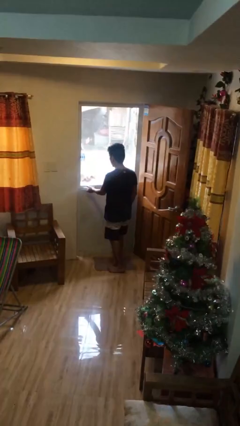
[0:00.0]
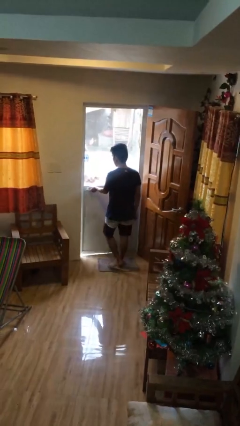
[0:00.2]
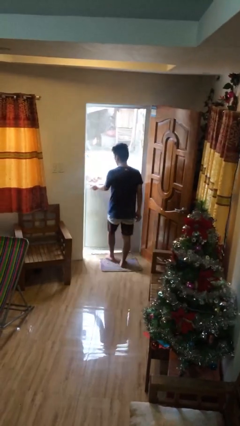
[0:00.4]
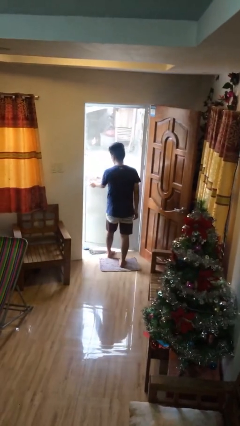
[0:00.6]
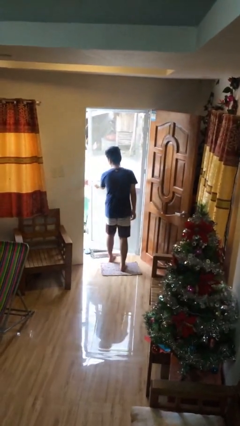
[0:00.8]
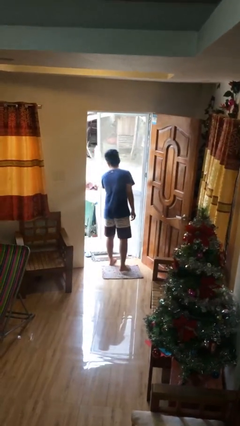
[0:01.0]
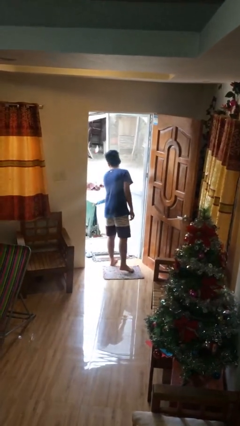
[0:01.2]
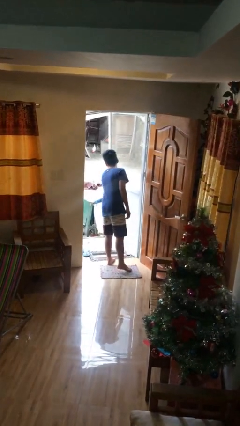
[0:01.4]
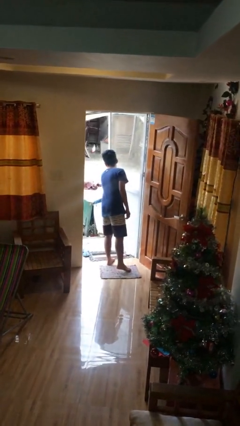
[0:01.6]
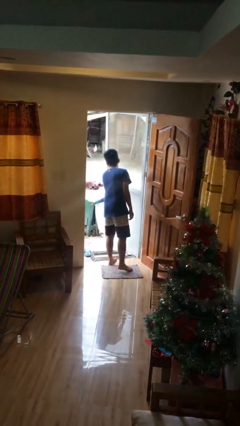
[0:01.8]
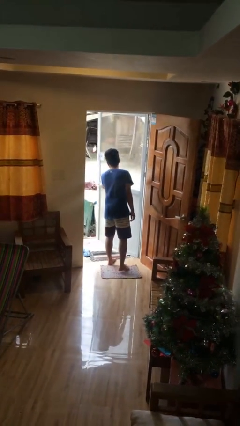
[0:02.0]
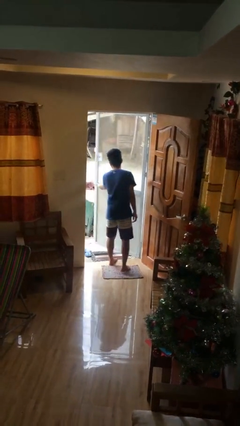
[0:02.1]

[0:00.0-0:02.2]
person opens facility door

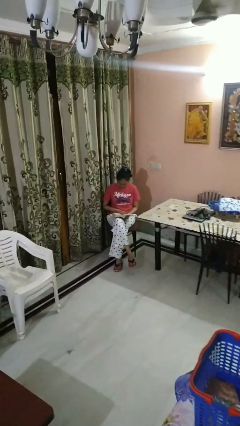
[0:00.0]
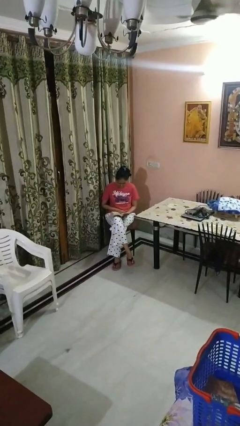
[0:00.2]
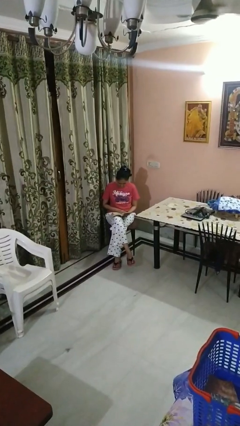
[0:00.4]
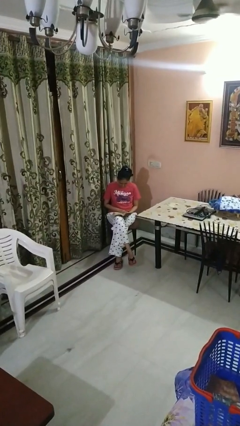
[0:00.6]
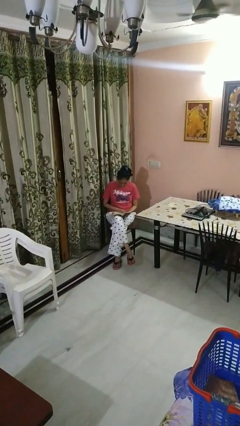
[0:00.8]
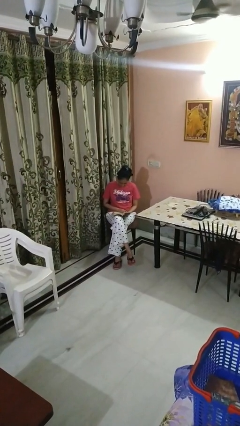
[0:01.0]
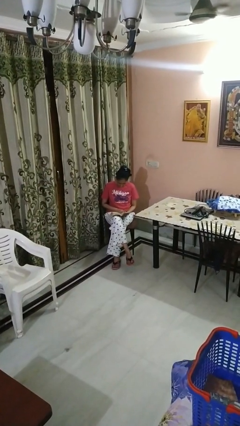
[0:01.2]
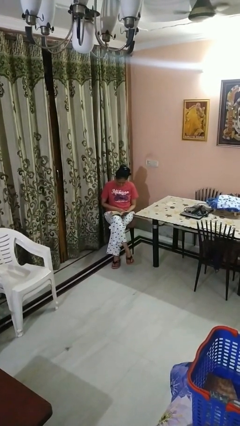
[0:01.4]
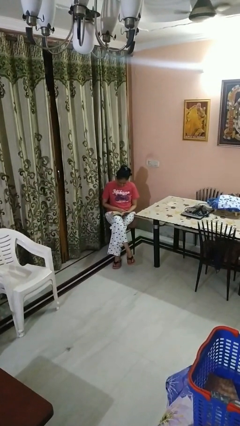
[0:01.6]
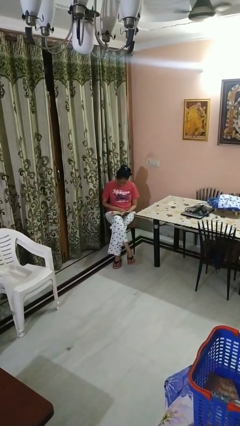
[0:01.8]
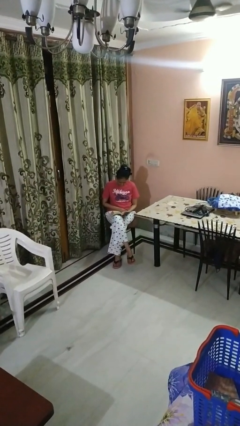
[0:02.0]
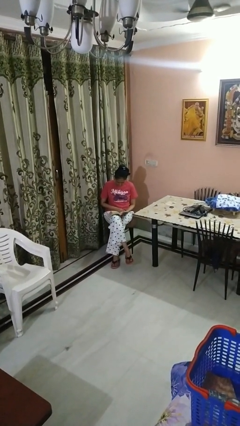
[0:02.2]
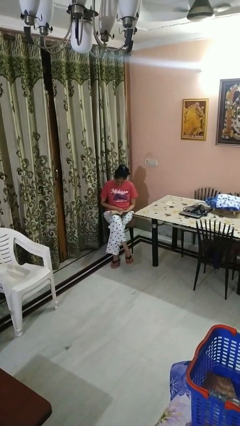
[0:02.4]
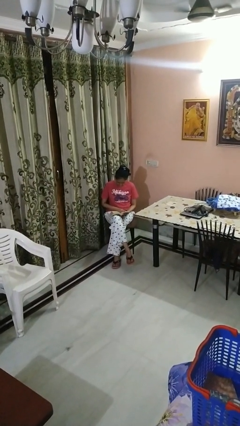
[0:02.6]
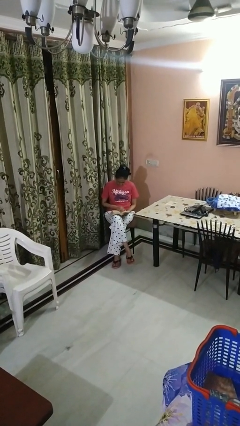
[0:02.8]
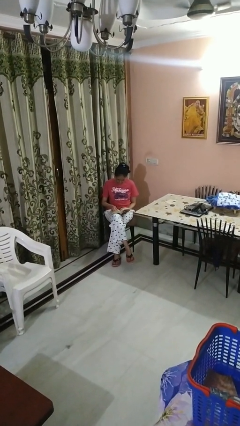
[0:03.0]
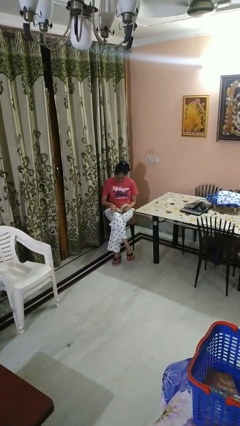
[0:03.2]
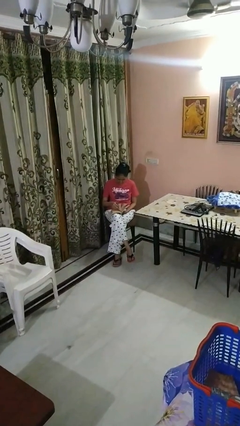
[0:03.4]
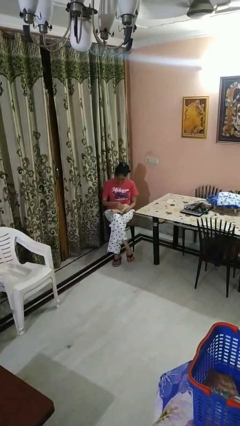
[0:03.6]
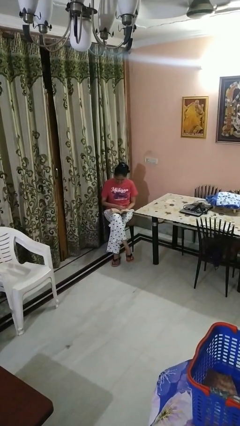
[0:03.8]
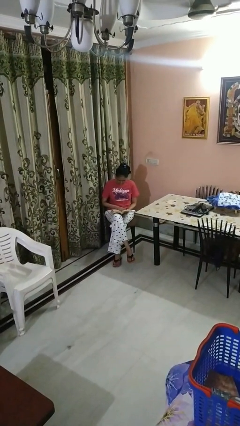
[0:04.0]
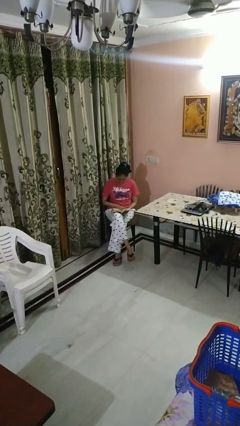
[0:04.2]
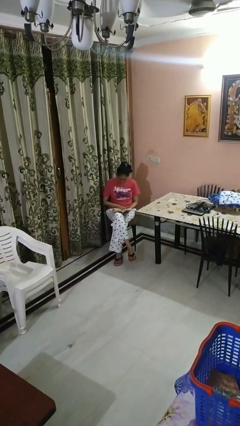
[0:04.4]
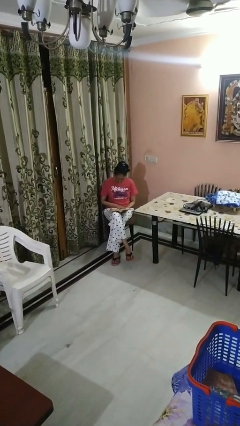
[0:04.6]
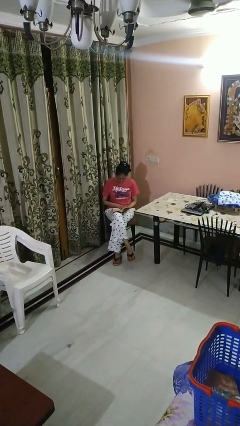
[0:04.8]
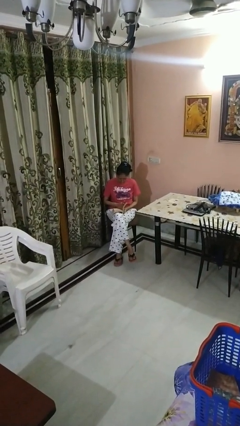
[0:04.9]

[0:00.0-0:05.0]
person reads book

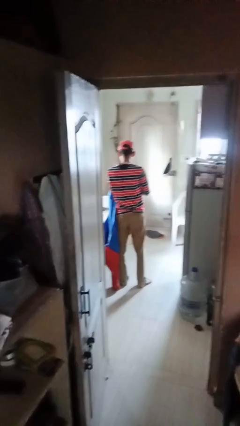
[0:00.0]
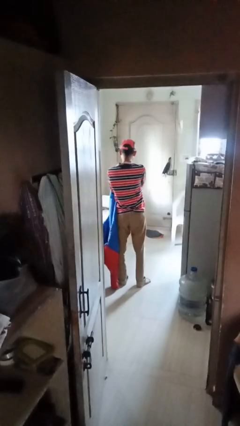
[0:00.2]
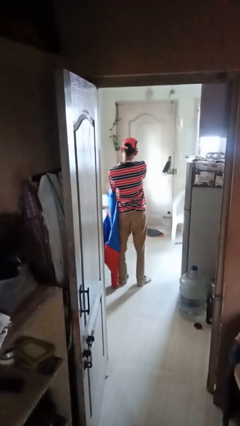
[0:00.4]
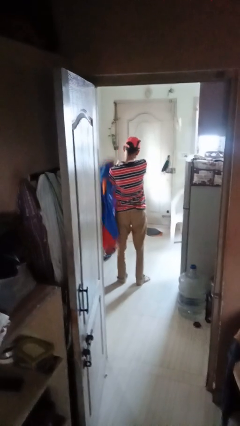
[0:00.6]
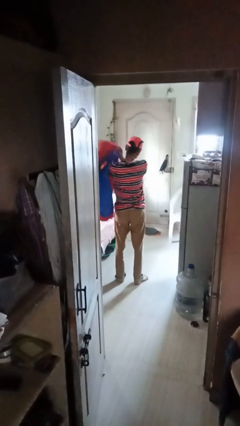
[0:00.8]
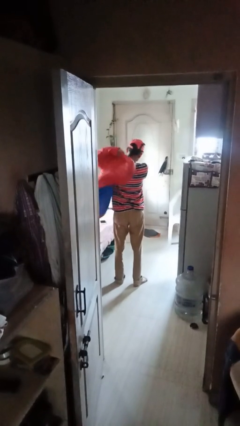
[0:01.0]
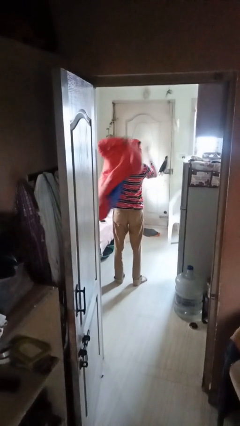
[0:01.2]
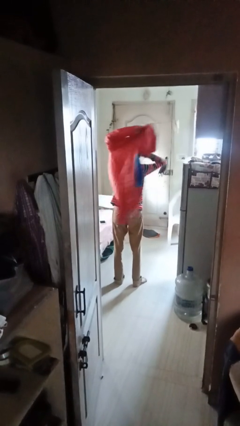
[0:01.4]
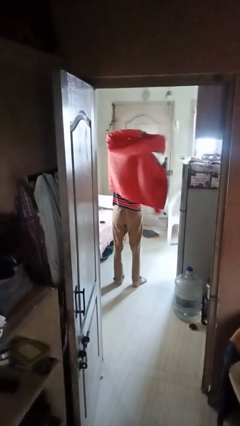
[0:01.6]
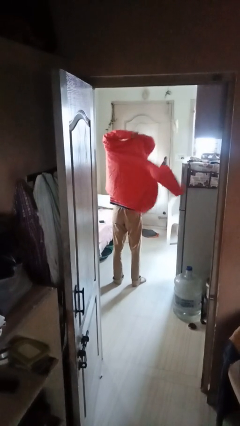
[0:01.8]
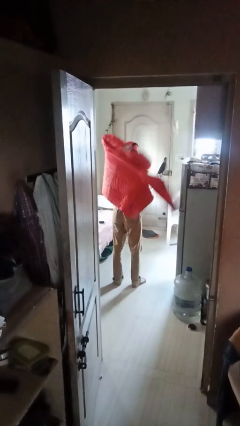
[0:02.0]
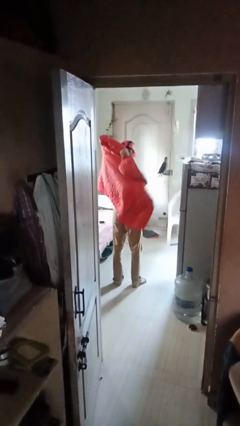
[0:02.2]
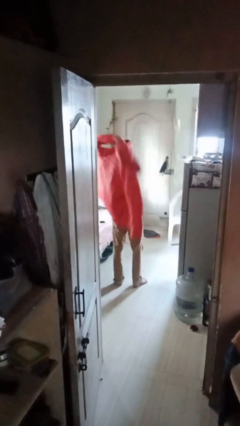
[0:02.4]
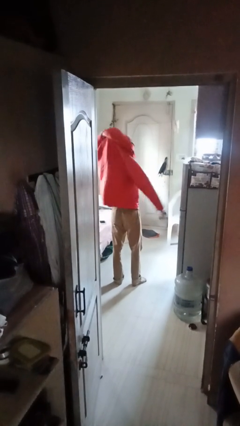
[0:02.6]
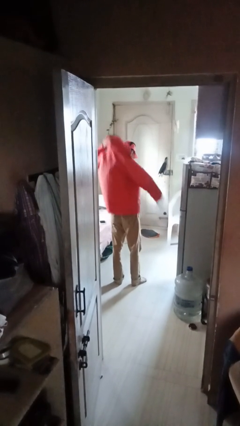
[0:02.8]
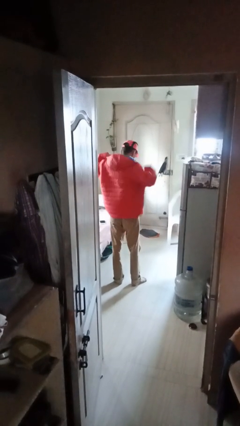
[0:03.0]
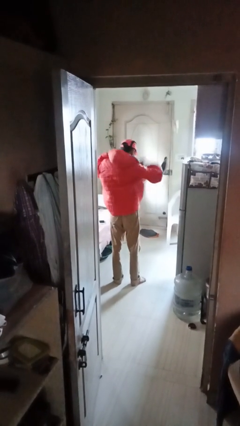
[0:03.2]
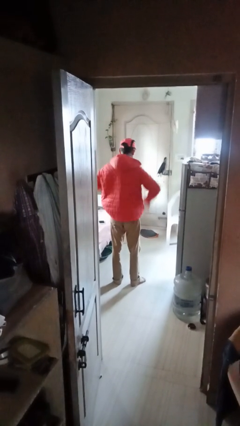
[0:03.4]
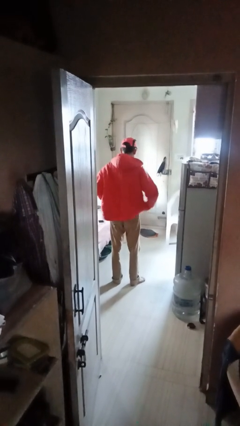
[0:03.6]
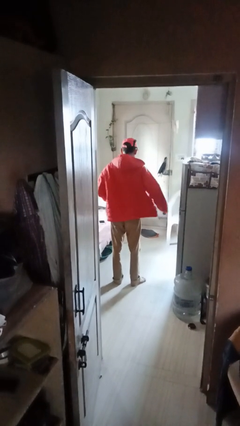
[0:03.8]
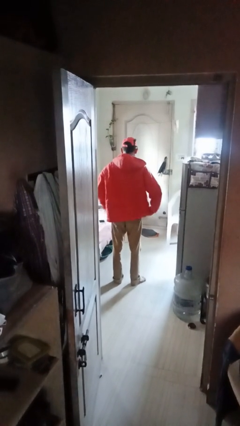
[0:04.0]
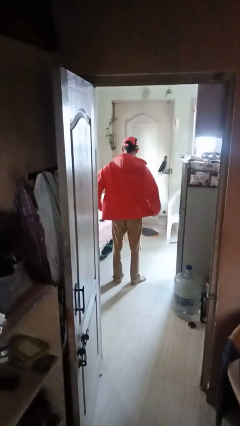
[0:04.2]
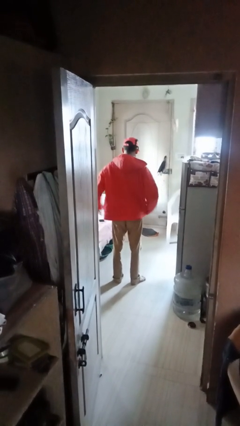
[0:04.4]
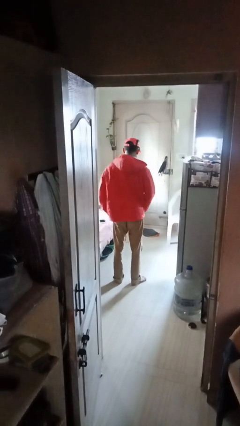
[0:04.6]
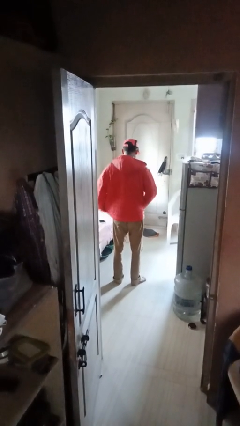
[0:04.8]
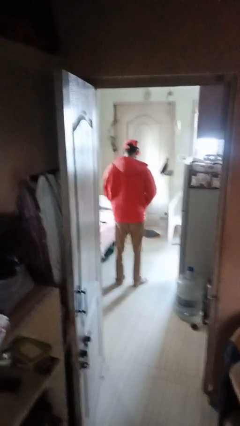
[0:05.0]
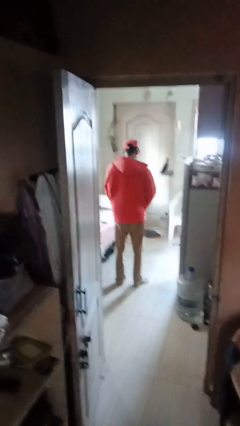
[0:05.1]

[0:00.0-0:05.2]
person puts on jacket

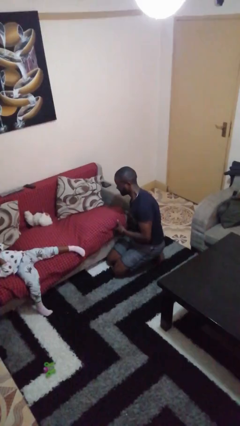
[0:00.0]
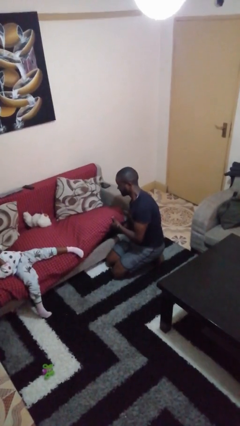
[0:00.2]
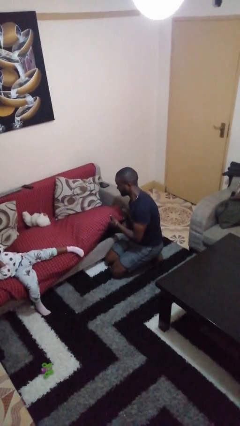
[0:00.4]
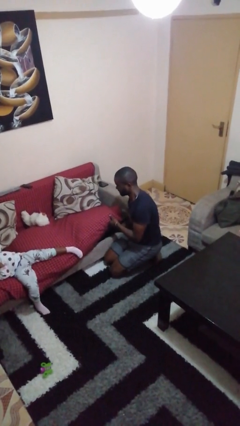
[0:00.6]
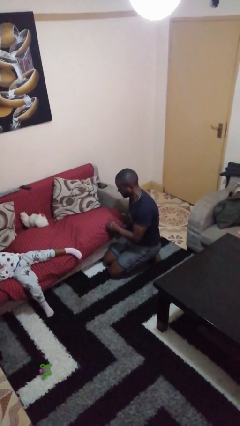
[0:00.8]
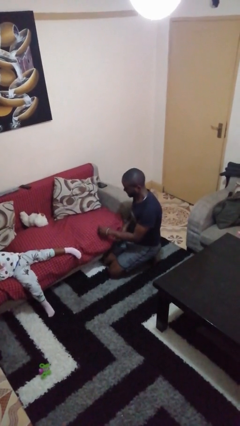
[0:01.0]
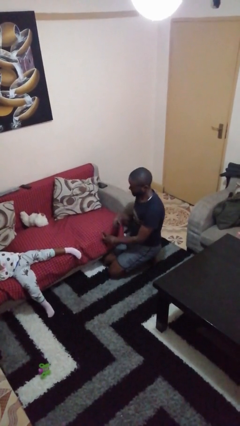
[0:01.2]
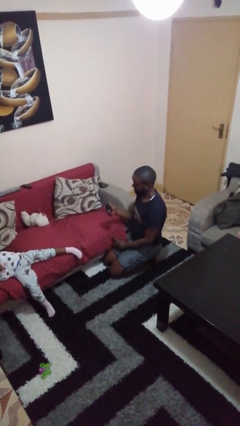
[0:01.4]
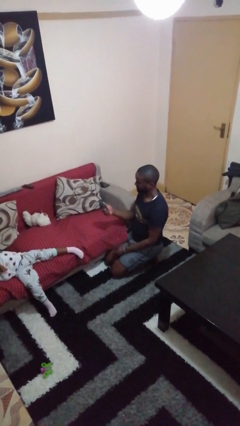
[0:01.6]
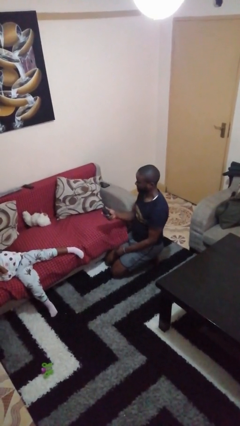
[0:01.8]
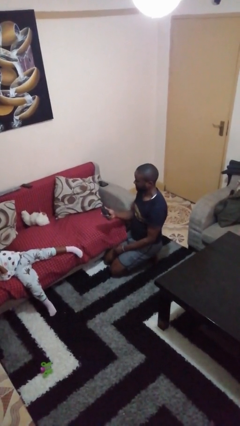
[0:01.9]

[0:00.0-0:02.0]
person searches in couch

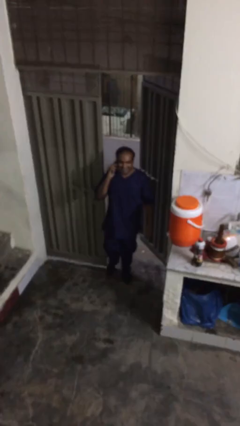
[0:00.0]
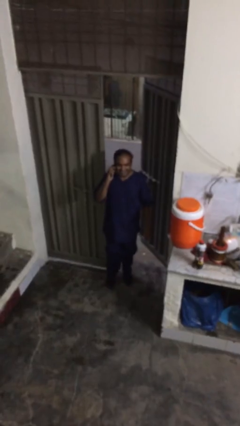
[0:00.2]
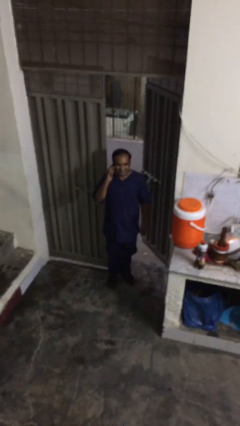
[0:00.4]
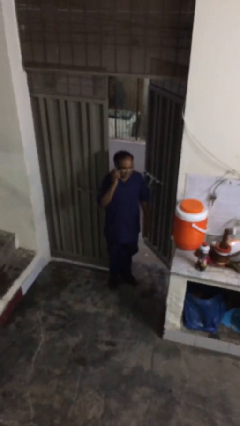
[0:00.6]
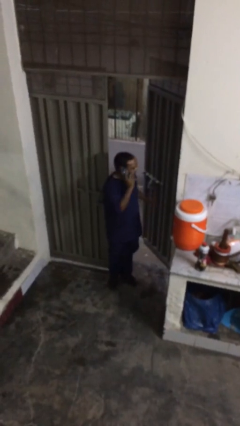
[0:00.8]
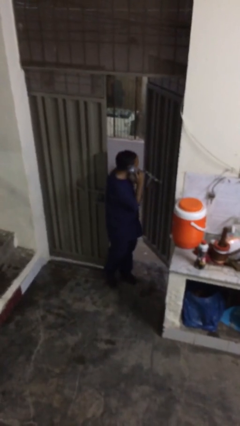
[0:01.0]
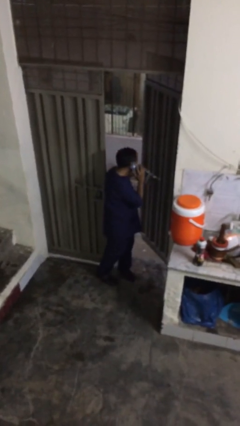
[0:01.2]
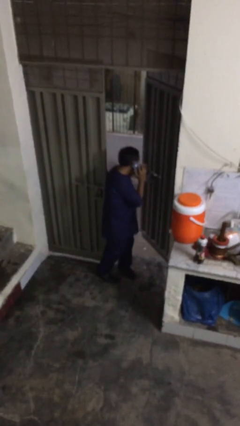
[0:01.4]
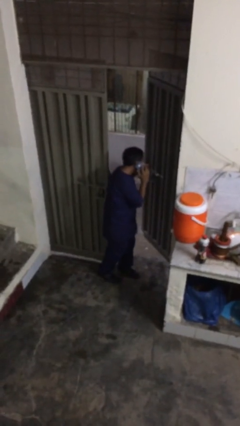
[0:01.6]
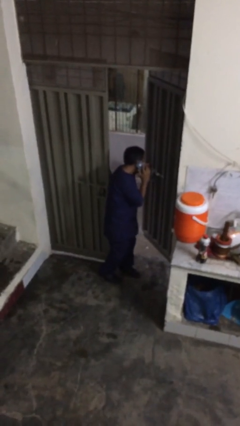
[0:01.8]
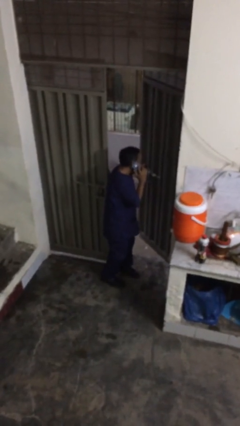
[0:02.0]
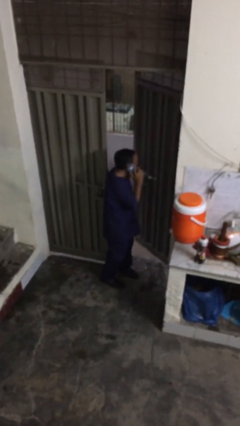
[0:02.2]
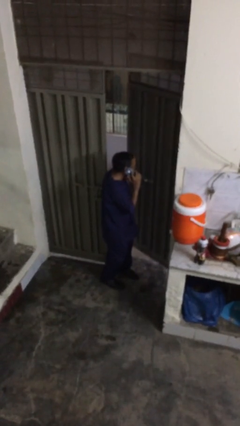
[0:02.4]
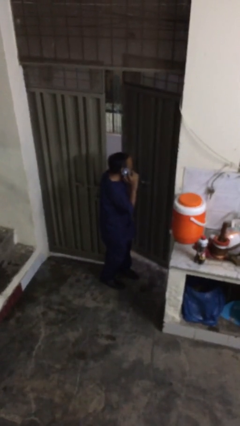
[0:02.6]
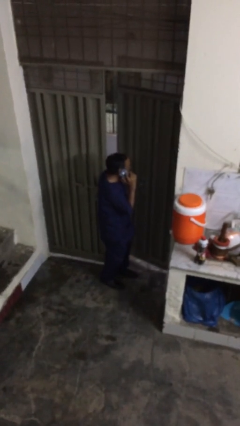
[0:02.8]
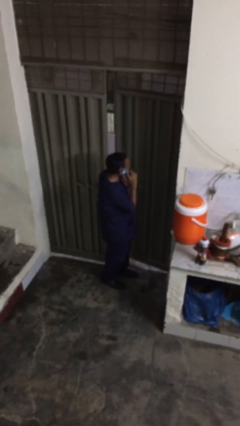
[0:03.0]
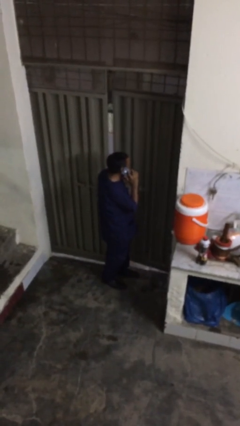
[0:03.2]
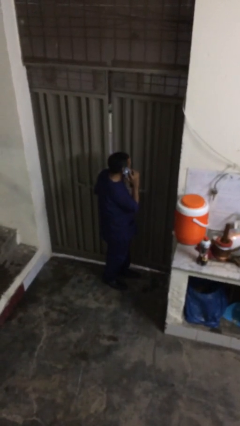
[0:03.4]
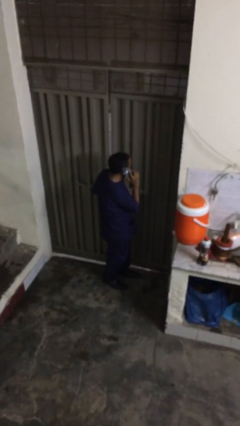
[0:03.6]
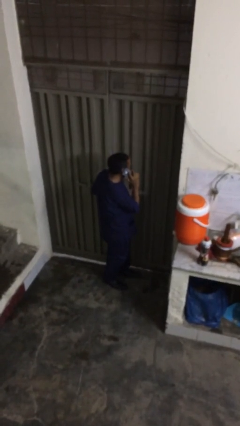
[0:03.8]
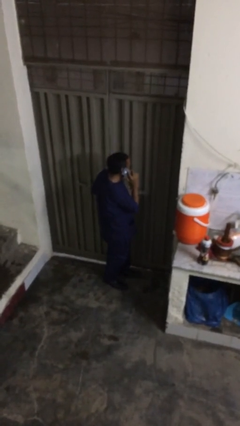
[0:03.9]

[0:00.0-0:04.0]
person closes facility door
